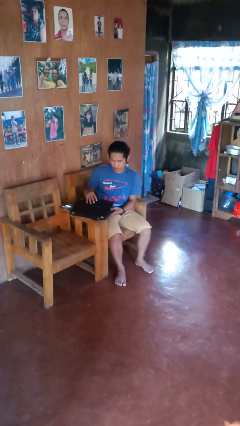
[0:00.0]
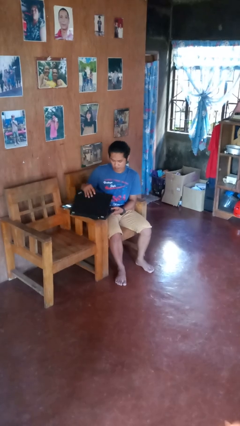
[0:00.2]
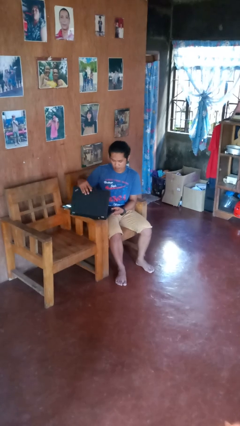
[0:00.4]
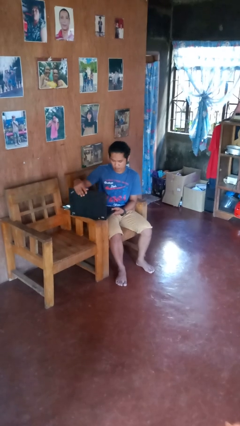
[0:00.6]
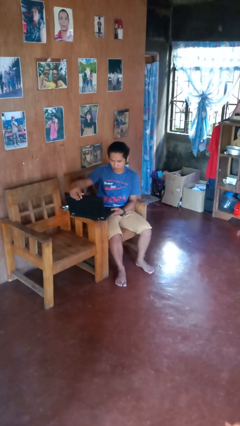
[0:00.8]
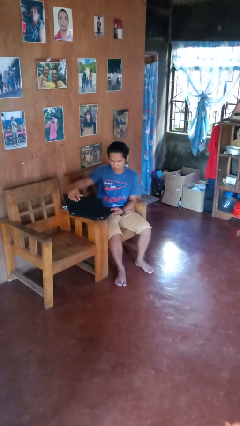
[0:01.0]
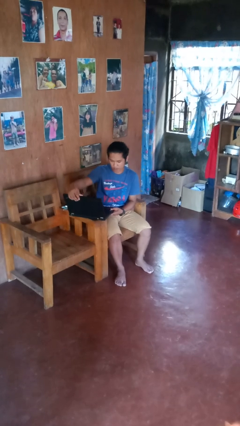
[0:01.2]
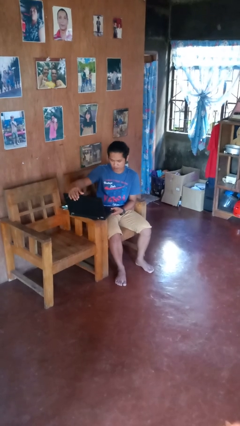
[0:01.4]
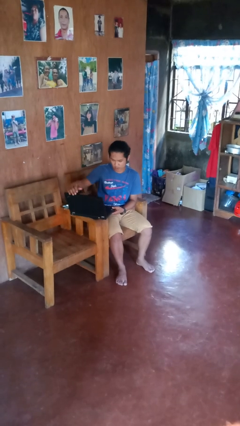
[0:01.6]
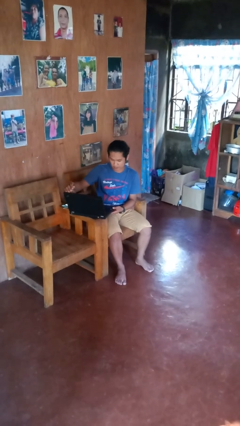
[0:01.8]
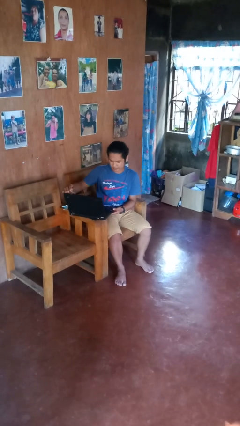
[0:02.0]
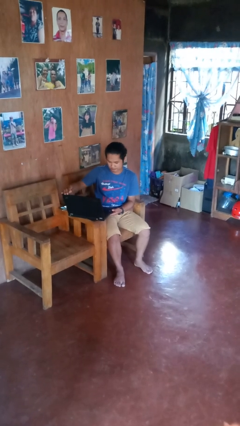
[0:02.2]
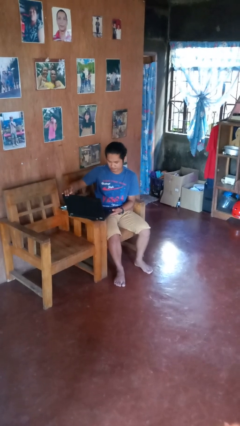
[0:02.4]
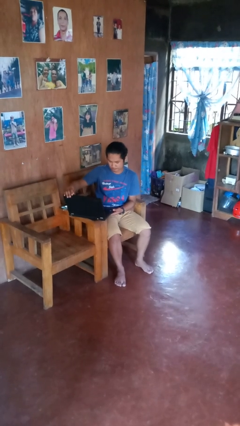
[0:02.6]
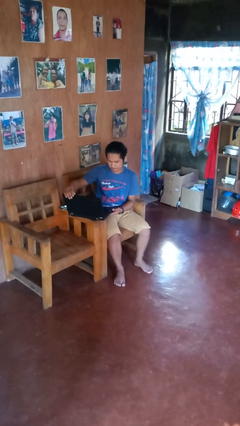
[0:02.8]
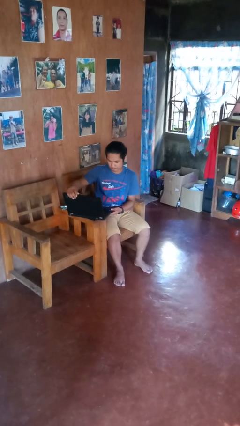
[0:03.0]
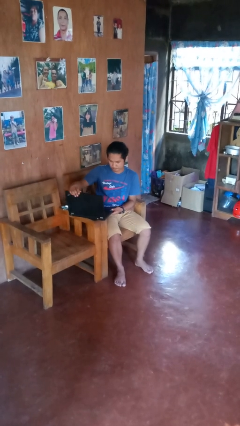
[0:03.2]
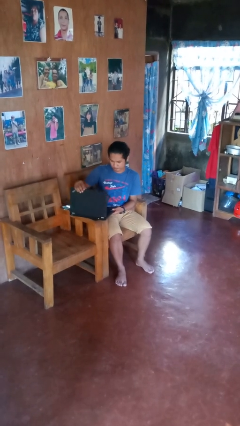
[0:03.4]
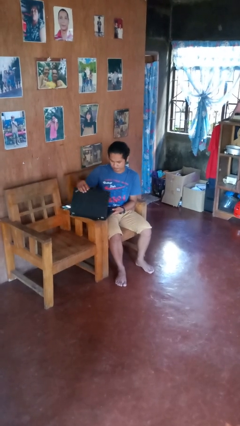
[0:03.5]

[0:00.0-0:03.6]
person opens laptop

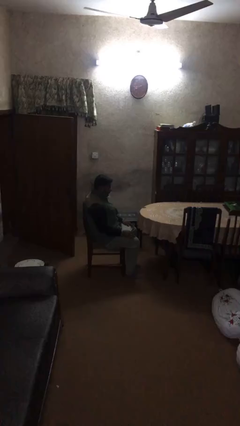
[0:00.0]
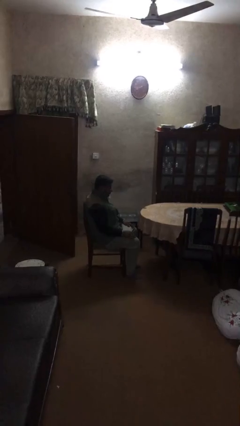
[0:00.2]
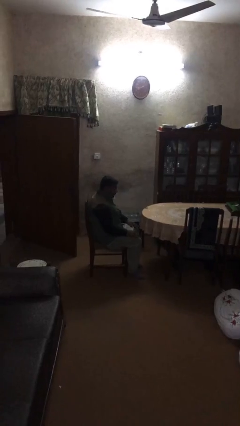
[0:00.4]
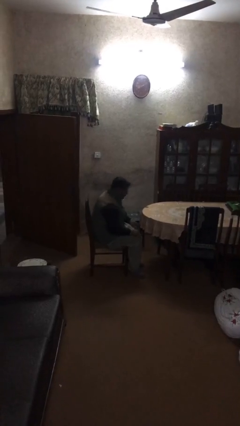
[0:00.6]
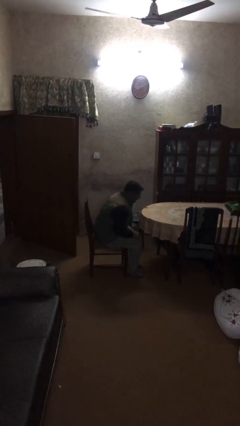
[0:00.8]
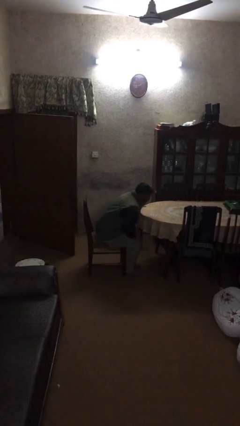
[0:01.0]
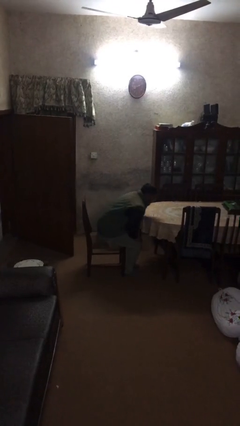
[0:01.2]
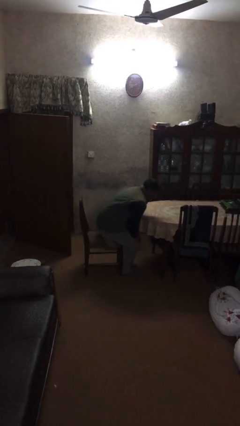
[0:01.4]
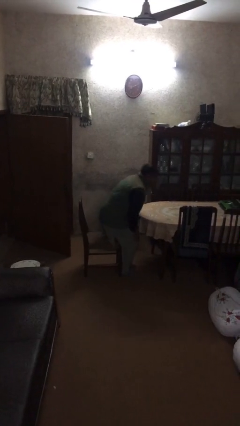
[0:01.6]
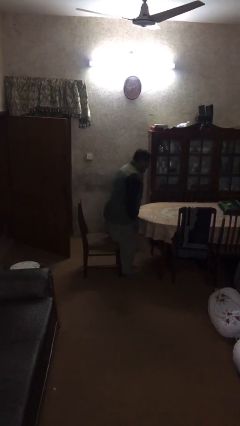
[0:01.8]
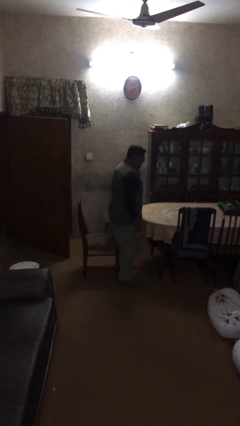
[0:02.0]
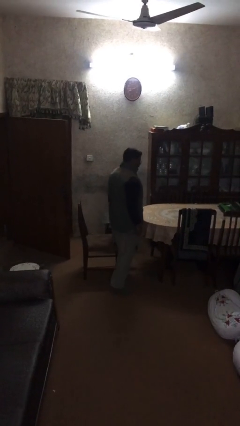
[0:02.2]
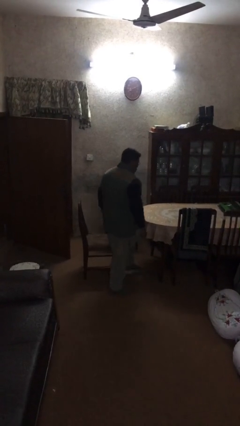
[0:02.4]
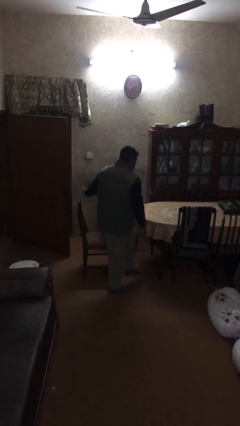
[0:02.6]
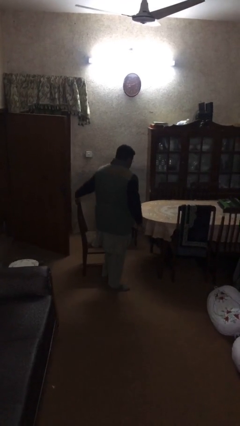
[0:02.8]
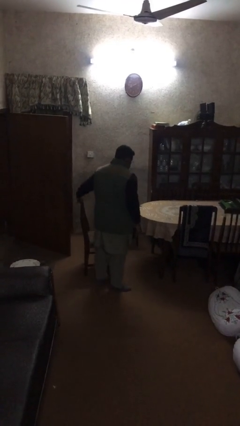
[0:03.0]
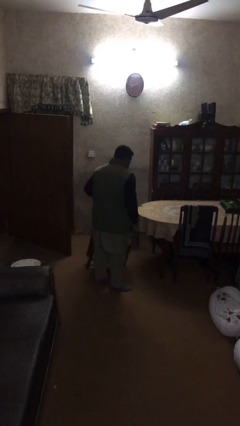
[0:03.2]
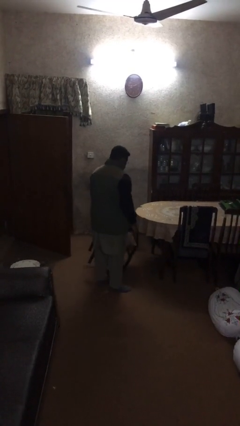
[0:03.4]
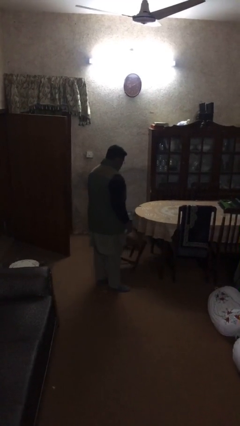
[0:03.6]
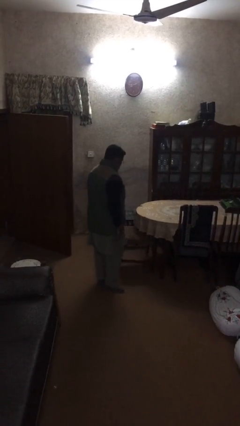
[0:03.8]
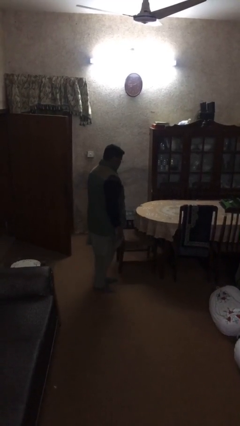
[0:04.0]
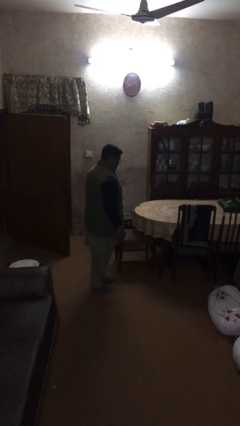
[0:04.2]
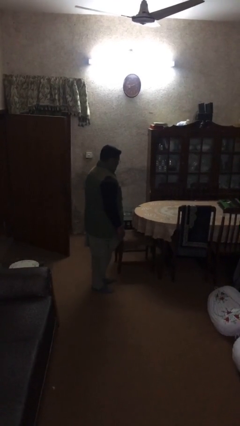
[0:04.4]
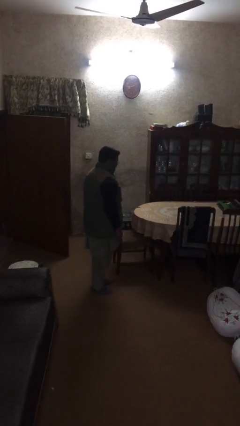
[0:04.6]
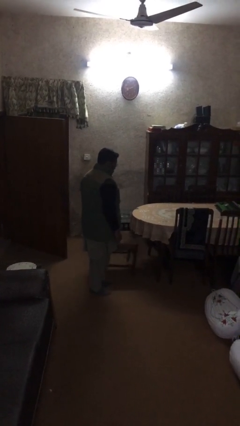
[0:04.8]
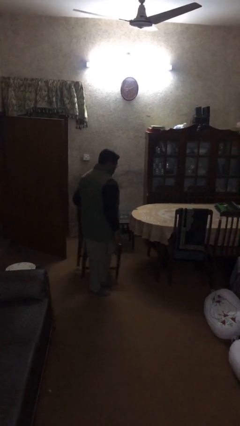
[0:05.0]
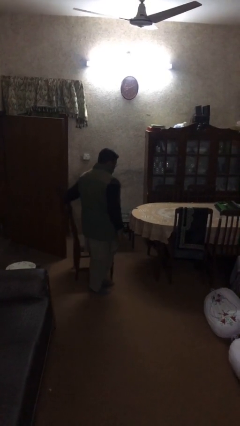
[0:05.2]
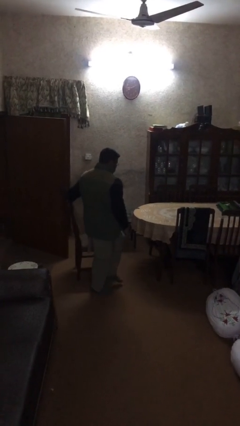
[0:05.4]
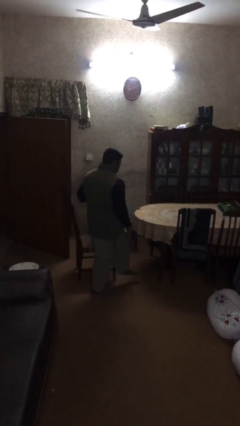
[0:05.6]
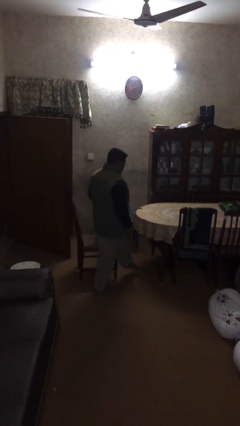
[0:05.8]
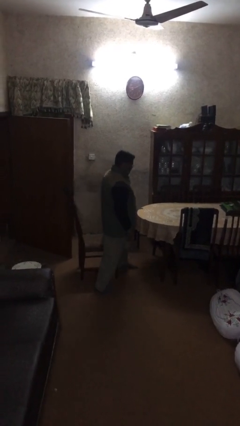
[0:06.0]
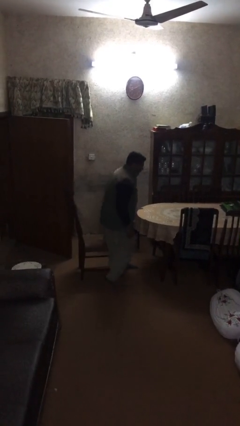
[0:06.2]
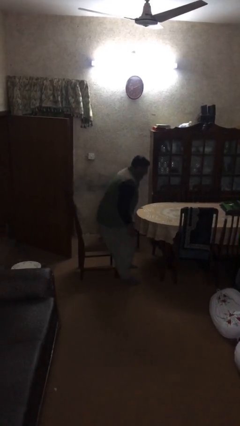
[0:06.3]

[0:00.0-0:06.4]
person stands up

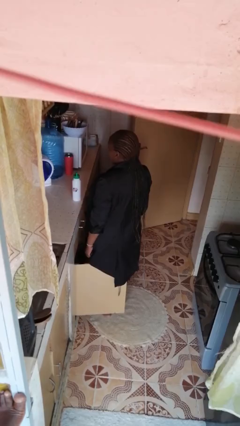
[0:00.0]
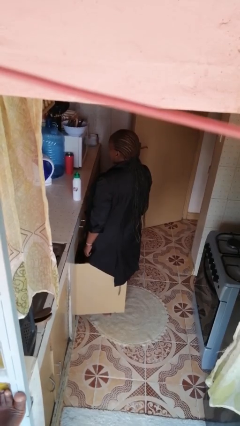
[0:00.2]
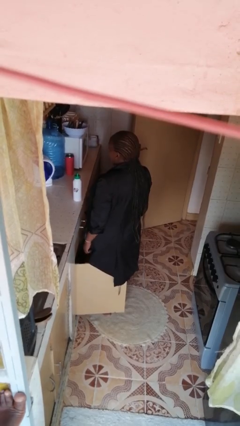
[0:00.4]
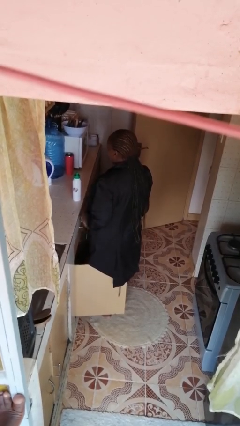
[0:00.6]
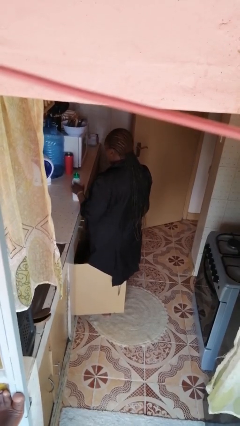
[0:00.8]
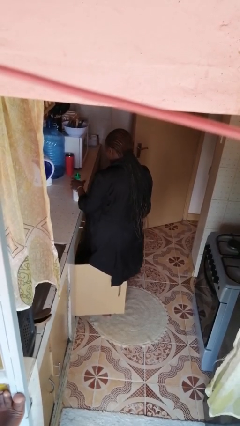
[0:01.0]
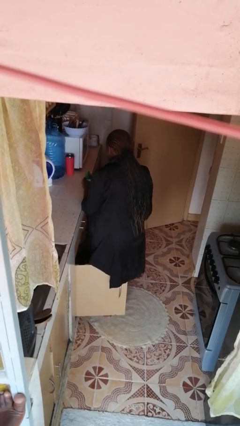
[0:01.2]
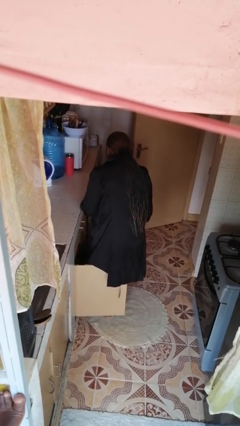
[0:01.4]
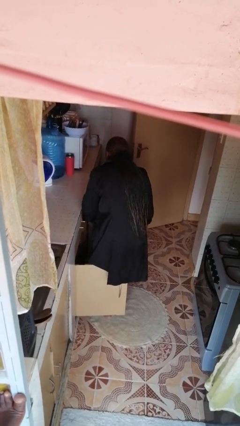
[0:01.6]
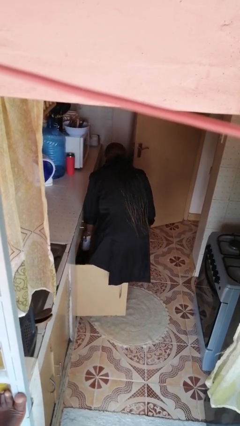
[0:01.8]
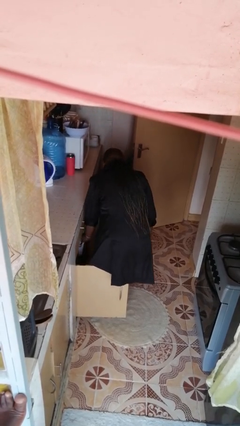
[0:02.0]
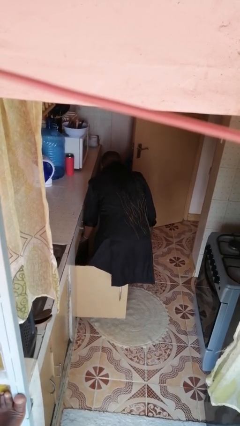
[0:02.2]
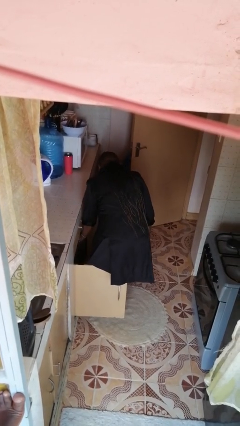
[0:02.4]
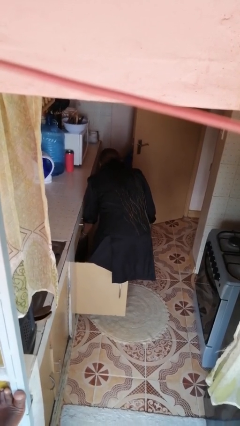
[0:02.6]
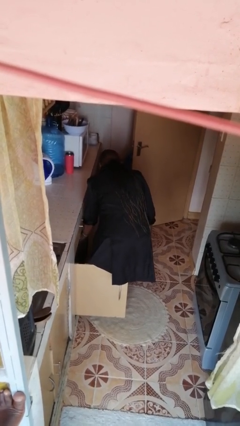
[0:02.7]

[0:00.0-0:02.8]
person puts object in cabinet

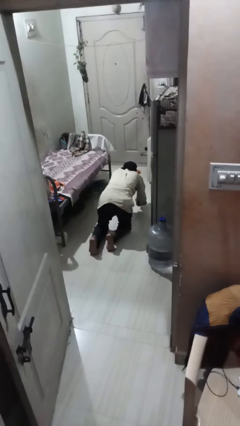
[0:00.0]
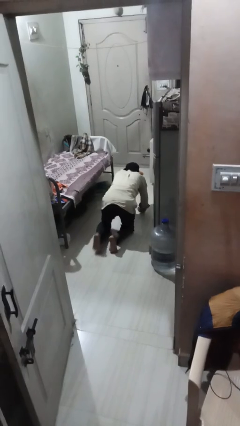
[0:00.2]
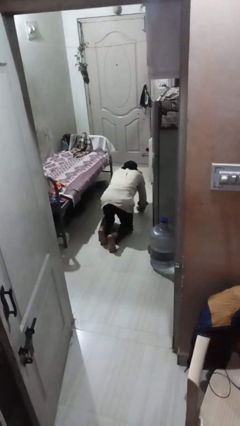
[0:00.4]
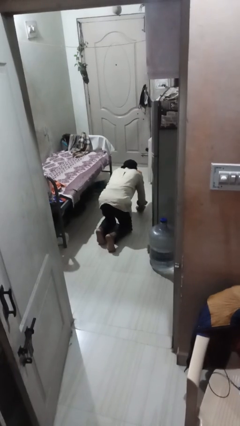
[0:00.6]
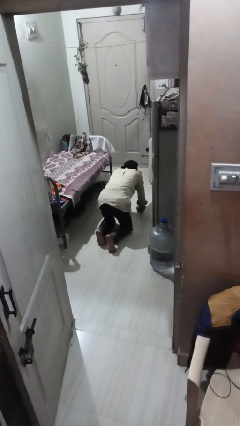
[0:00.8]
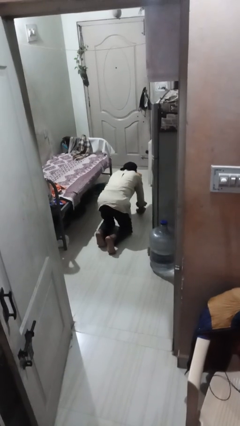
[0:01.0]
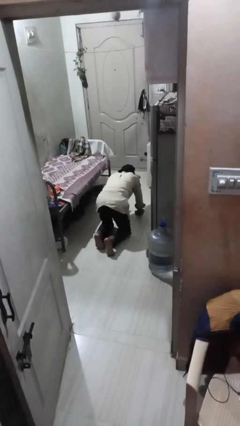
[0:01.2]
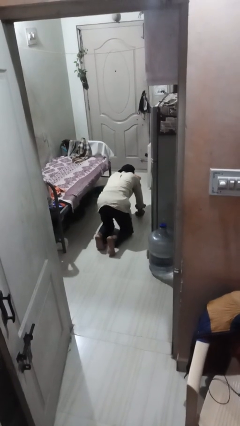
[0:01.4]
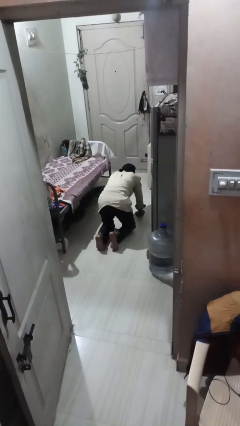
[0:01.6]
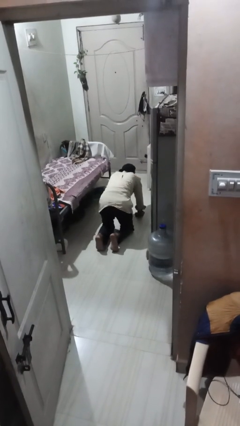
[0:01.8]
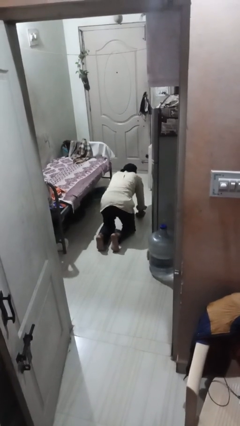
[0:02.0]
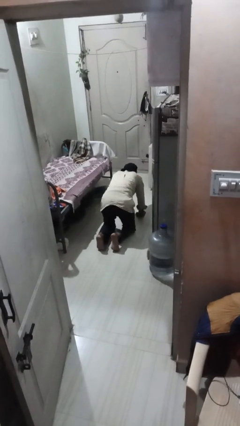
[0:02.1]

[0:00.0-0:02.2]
person crawls

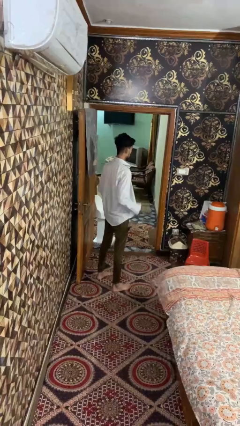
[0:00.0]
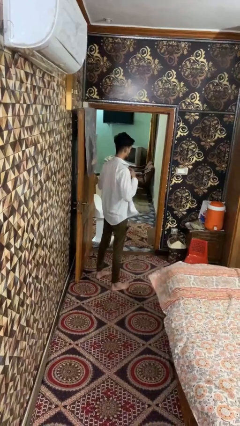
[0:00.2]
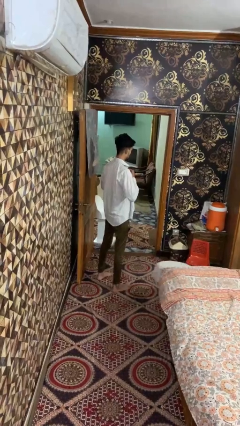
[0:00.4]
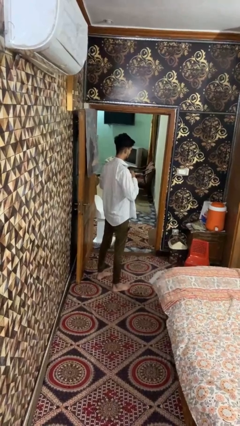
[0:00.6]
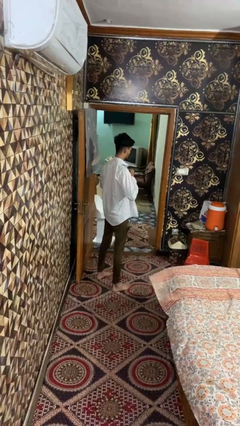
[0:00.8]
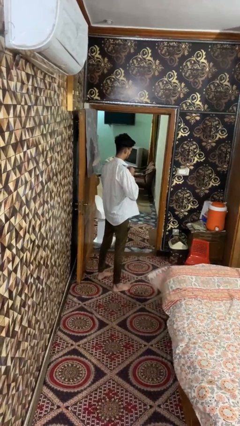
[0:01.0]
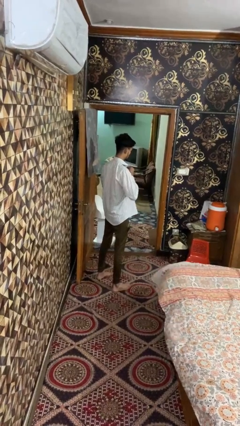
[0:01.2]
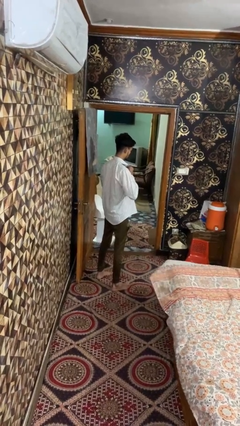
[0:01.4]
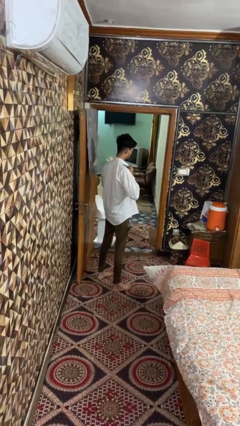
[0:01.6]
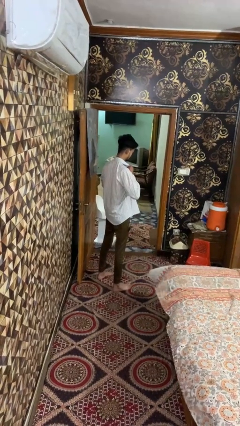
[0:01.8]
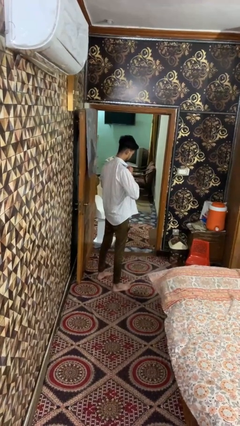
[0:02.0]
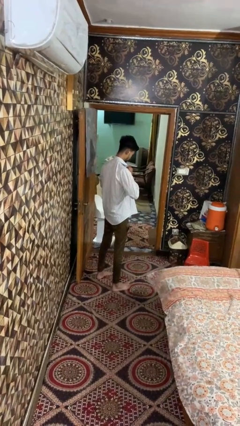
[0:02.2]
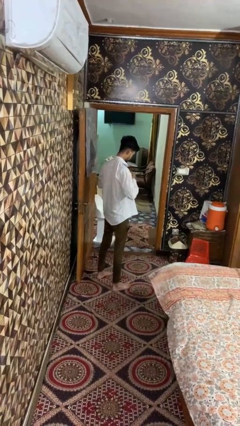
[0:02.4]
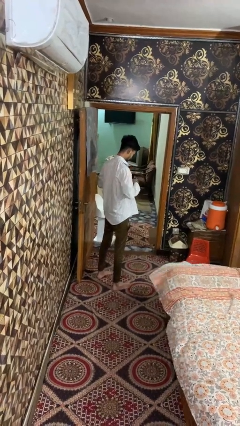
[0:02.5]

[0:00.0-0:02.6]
person buttons shirt
